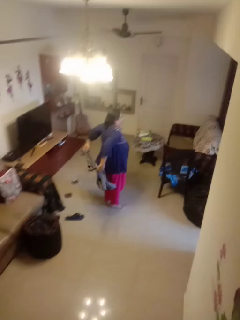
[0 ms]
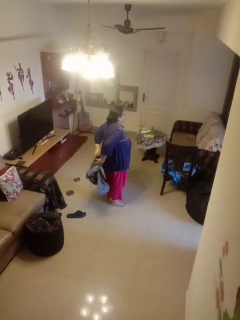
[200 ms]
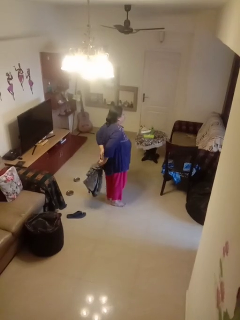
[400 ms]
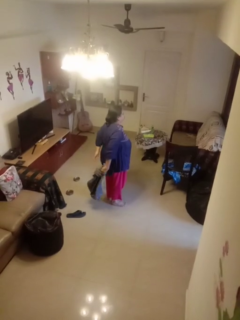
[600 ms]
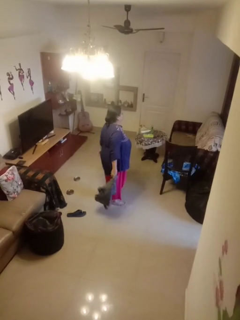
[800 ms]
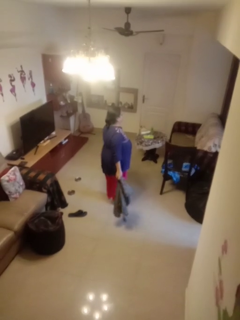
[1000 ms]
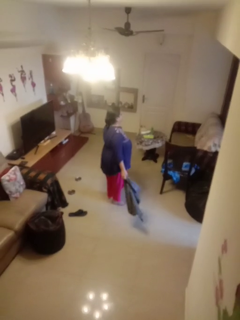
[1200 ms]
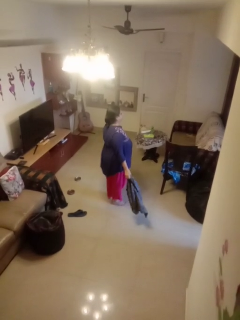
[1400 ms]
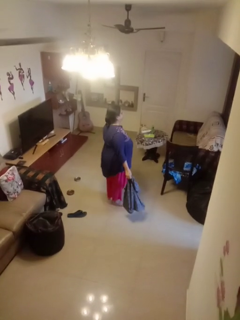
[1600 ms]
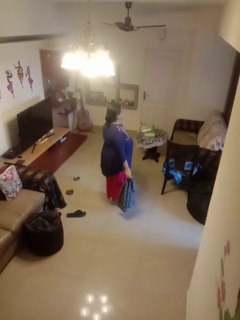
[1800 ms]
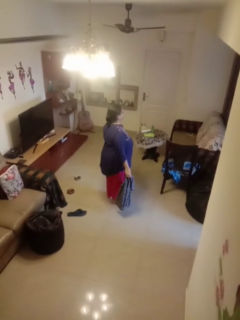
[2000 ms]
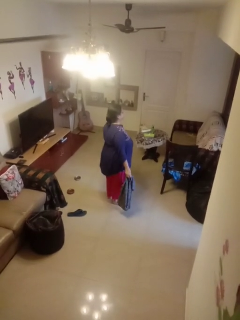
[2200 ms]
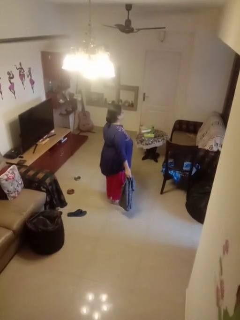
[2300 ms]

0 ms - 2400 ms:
person unties jacket around waist

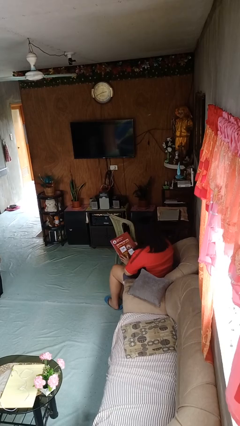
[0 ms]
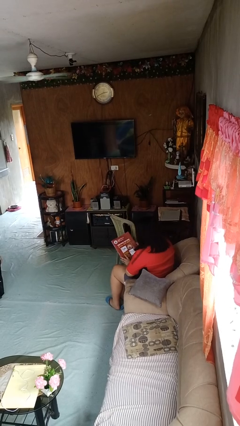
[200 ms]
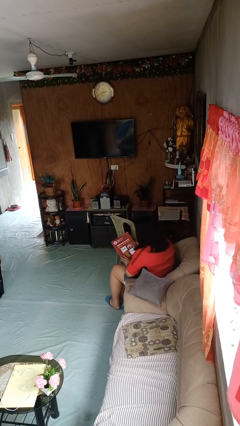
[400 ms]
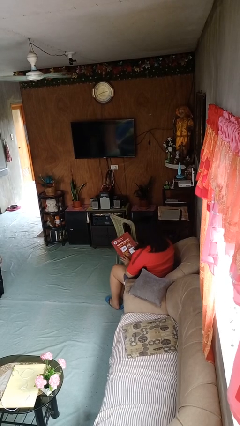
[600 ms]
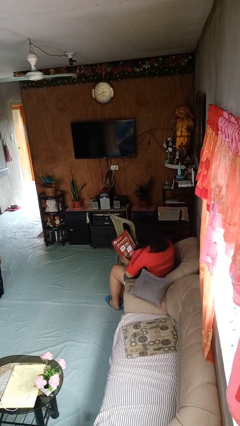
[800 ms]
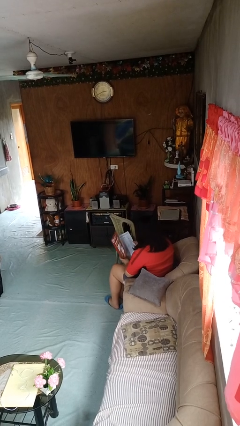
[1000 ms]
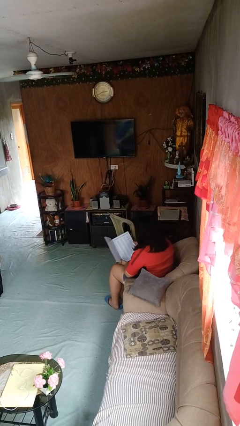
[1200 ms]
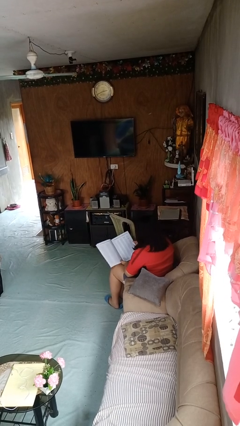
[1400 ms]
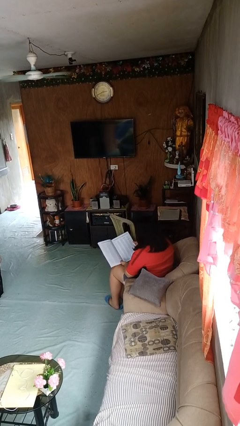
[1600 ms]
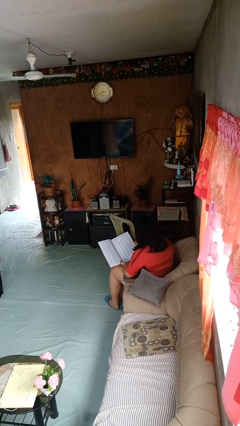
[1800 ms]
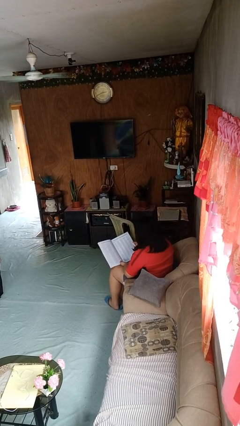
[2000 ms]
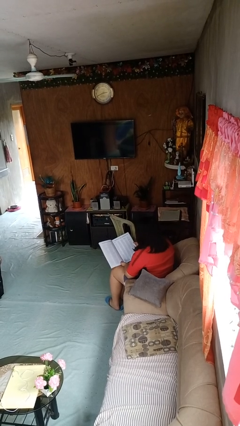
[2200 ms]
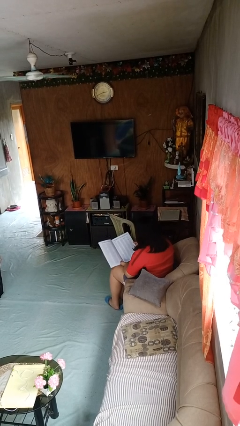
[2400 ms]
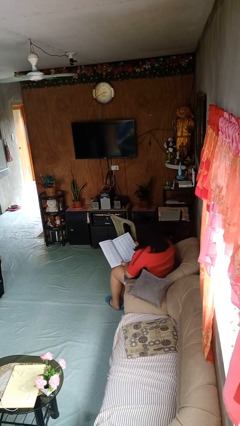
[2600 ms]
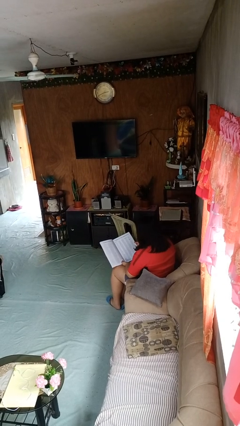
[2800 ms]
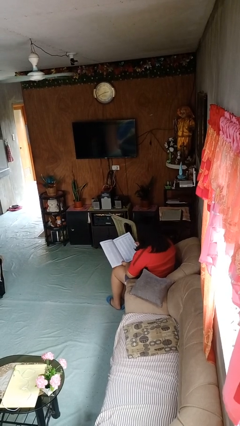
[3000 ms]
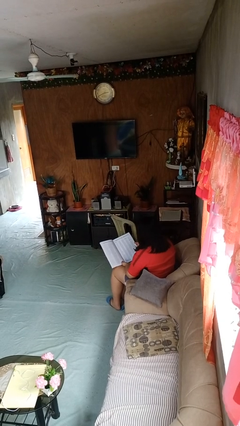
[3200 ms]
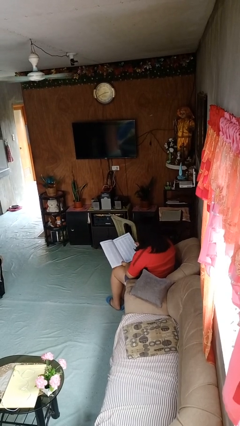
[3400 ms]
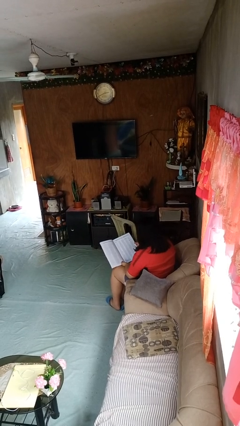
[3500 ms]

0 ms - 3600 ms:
person reads magazine

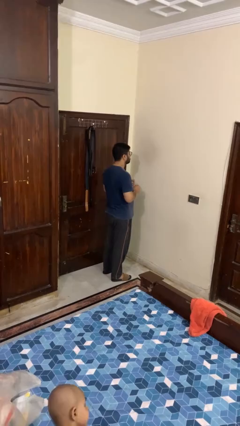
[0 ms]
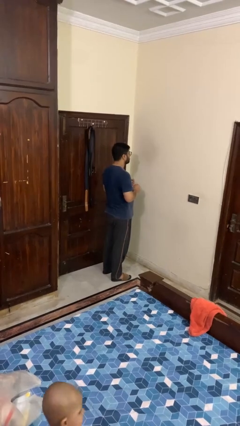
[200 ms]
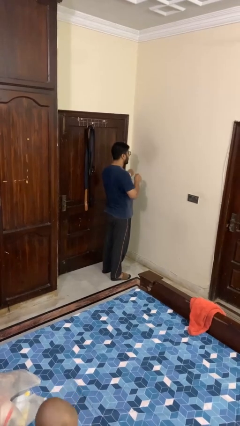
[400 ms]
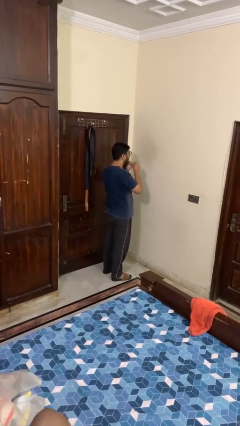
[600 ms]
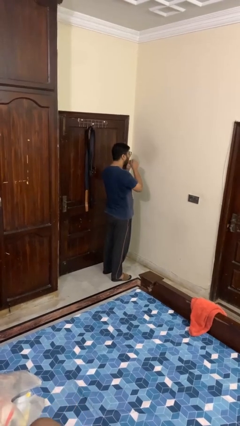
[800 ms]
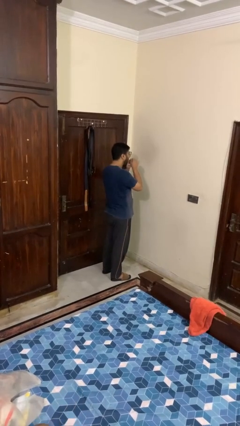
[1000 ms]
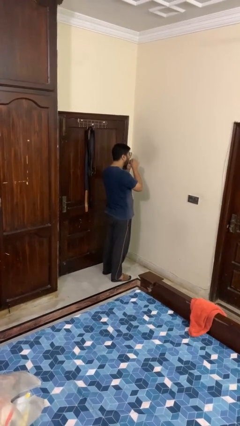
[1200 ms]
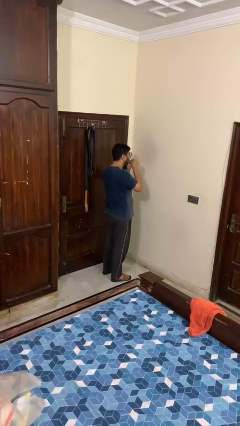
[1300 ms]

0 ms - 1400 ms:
person flosses

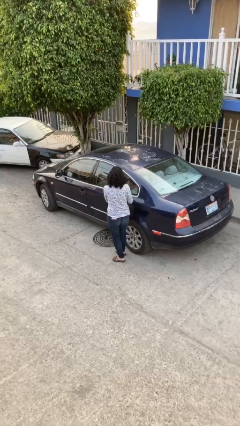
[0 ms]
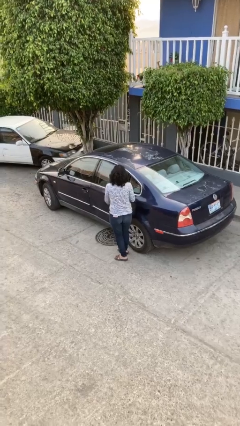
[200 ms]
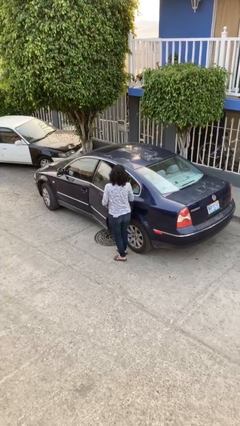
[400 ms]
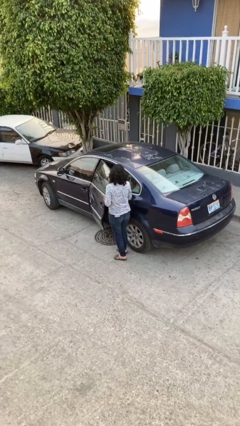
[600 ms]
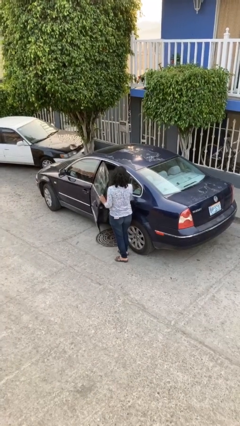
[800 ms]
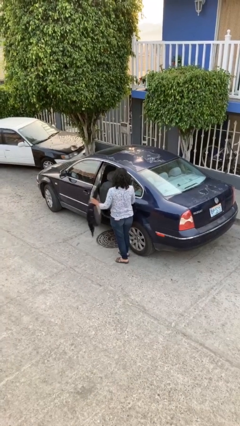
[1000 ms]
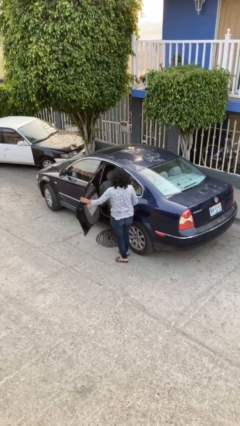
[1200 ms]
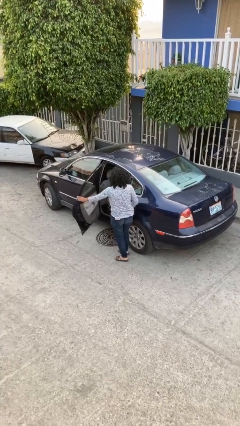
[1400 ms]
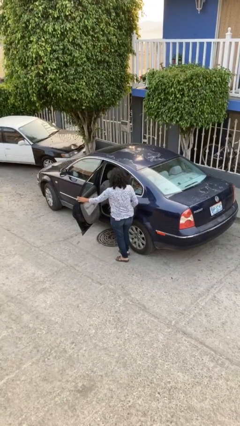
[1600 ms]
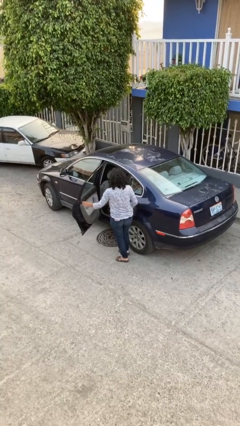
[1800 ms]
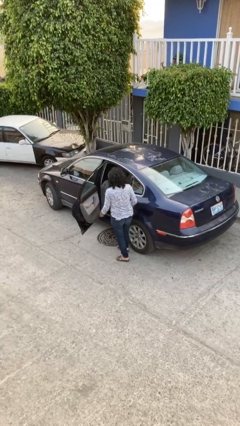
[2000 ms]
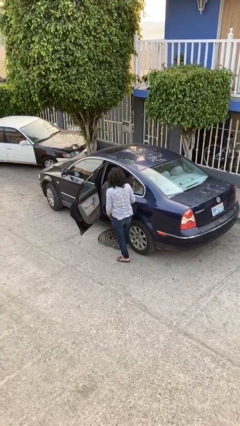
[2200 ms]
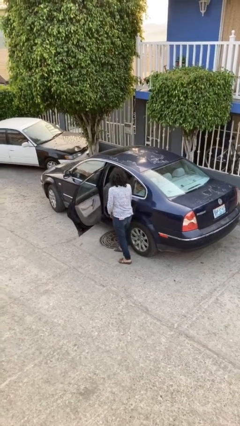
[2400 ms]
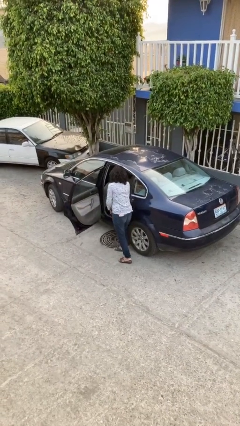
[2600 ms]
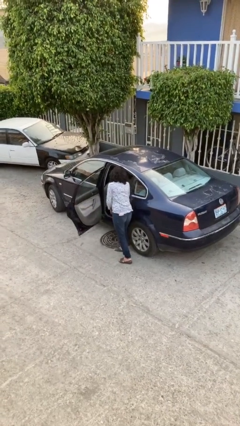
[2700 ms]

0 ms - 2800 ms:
person opens car door

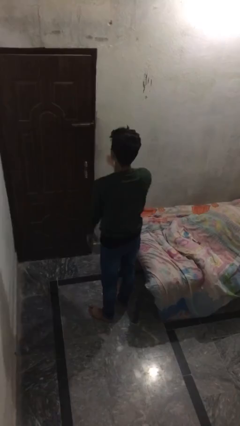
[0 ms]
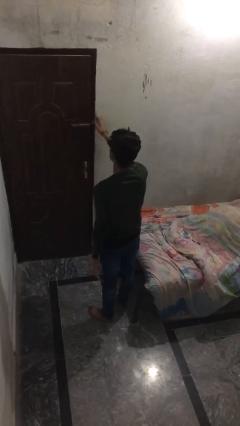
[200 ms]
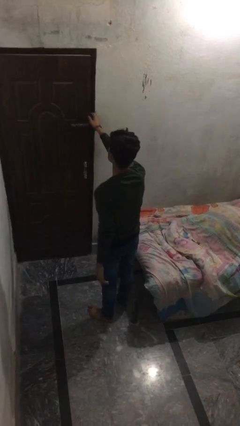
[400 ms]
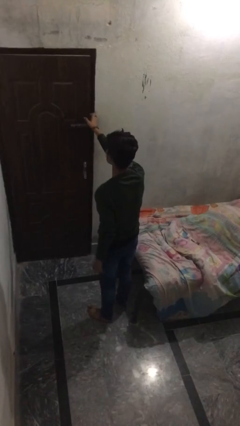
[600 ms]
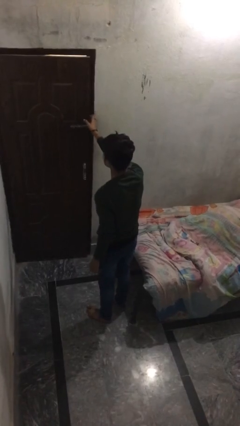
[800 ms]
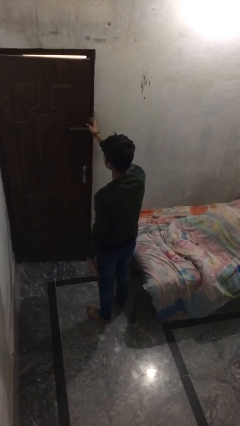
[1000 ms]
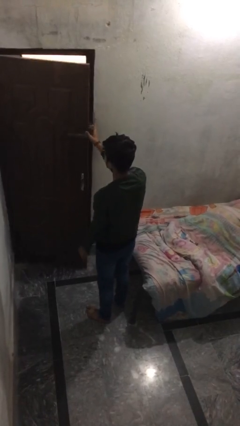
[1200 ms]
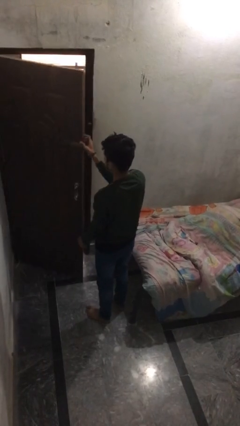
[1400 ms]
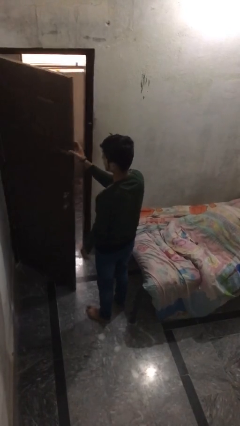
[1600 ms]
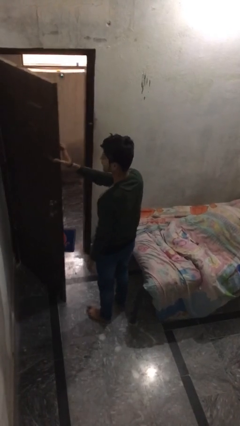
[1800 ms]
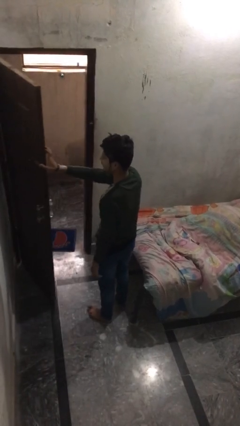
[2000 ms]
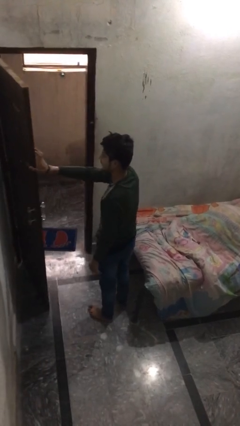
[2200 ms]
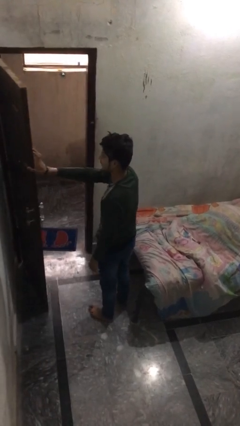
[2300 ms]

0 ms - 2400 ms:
person opens facility door

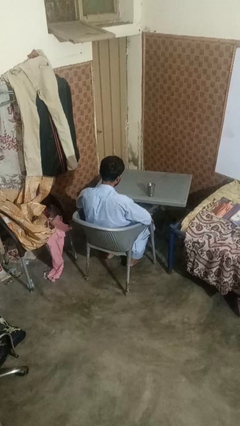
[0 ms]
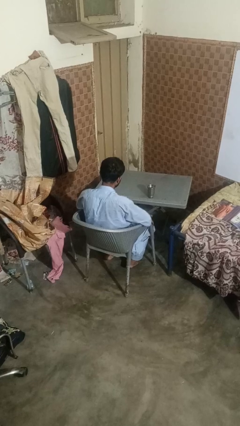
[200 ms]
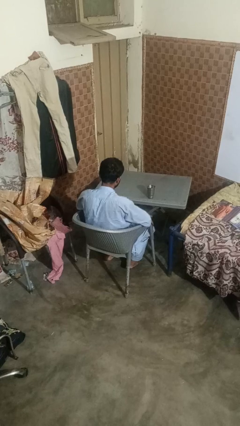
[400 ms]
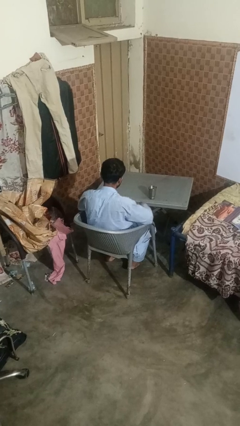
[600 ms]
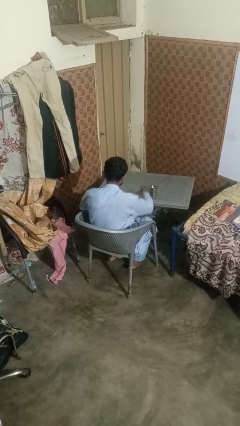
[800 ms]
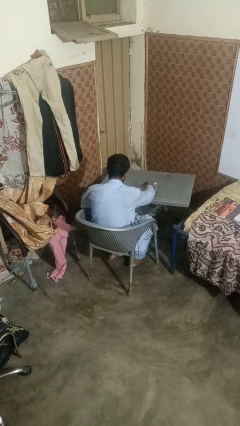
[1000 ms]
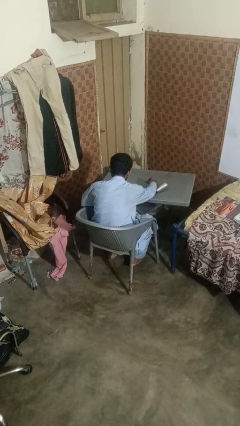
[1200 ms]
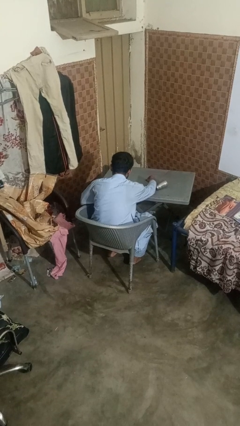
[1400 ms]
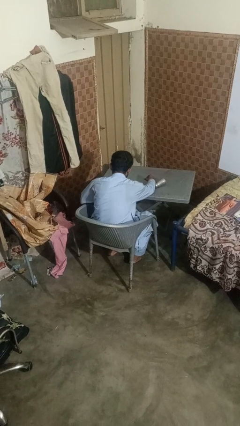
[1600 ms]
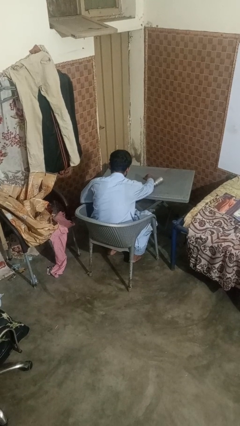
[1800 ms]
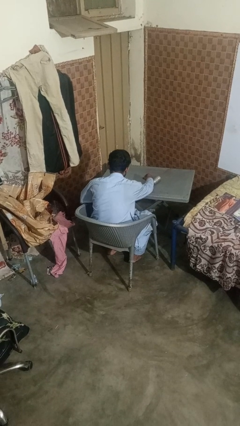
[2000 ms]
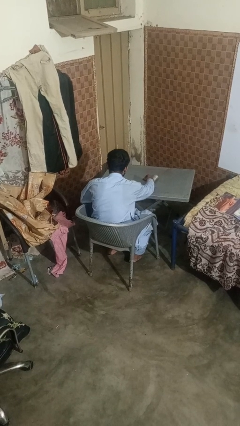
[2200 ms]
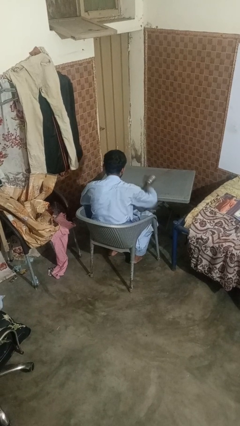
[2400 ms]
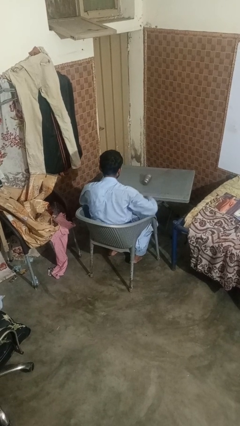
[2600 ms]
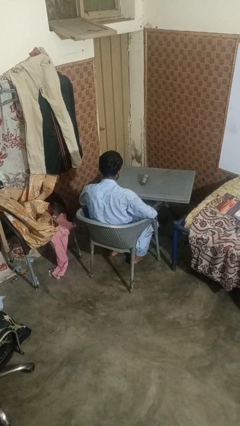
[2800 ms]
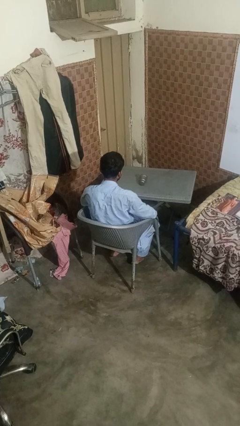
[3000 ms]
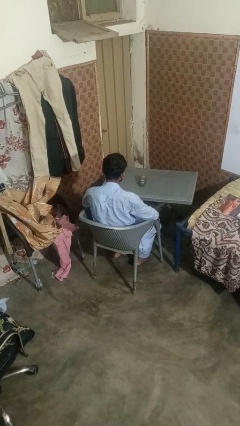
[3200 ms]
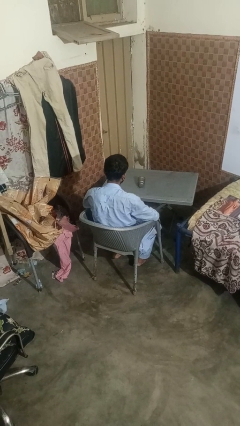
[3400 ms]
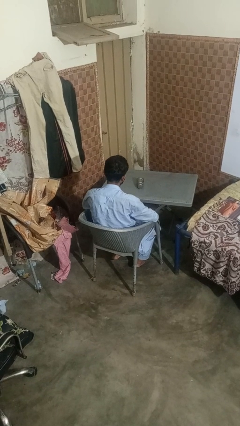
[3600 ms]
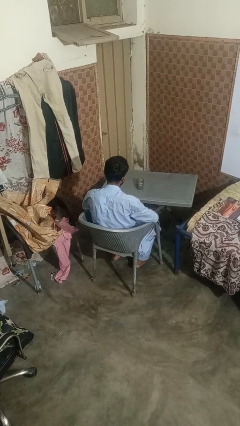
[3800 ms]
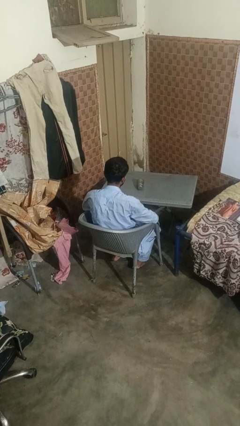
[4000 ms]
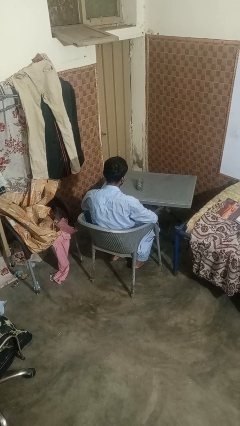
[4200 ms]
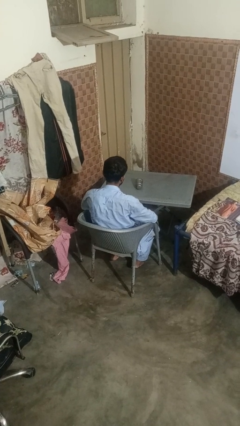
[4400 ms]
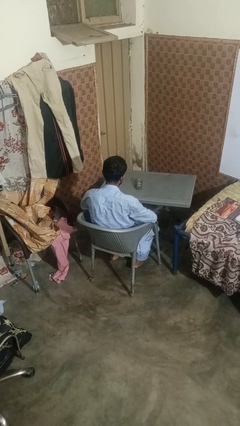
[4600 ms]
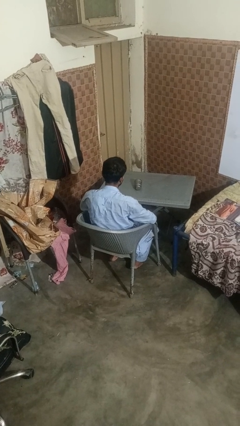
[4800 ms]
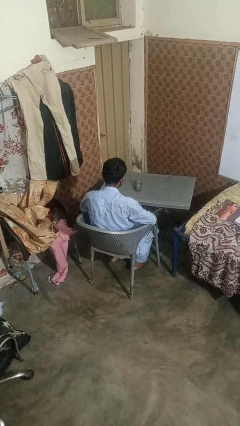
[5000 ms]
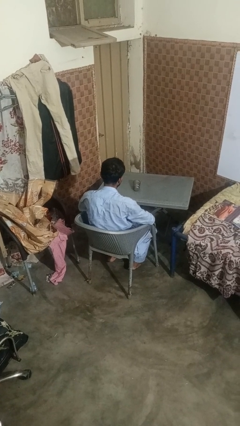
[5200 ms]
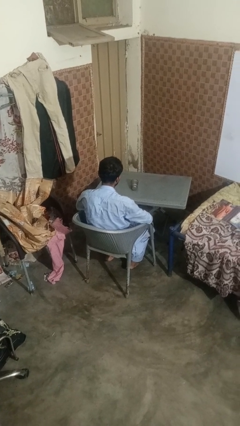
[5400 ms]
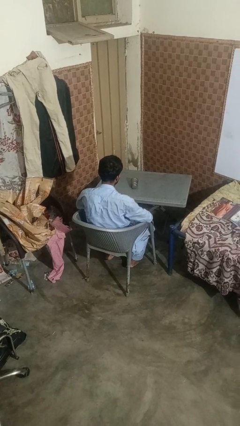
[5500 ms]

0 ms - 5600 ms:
person spills on table

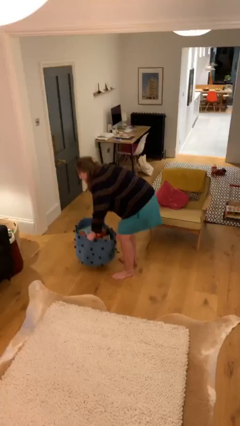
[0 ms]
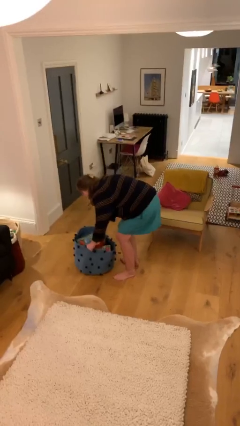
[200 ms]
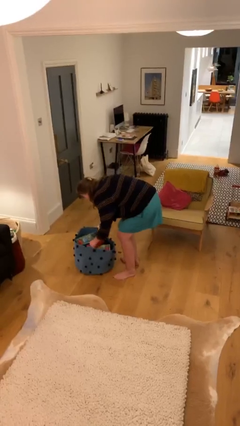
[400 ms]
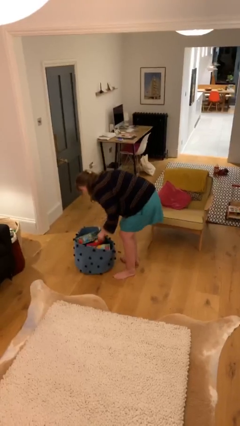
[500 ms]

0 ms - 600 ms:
person puts down object on floor
